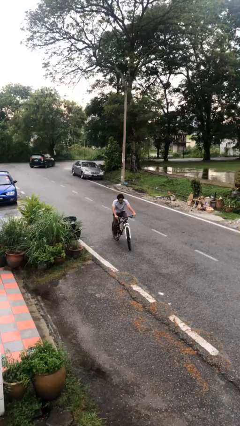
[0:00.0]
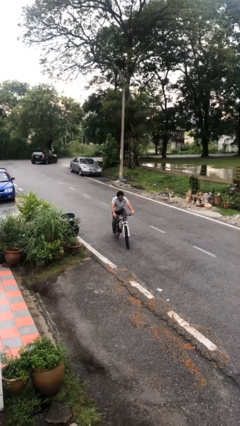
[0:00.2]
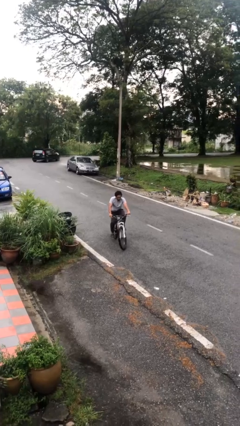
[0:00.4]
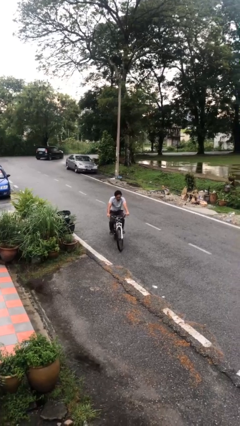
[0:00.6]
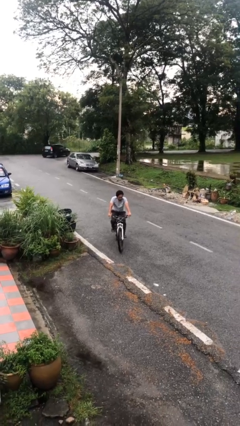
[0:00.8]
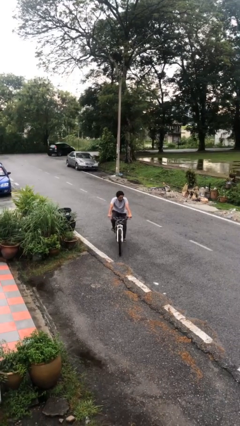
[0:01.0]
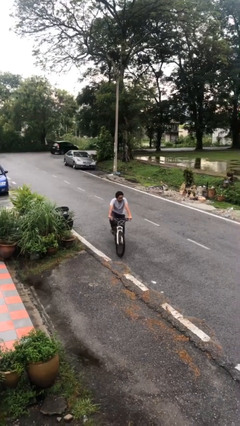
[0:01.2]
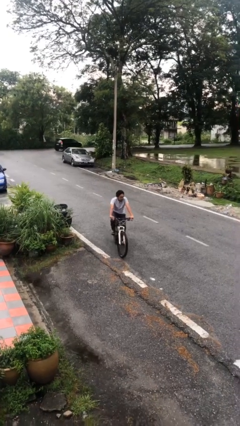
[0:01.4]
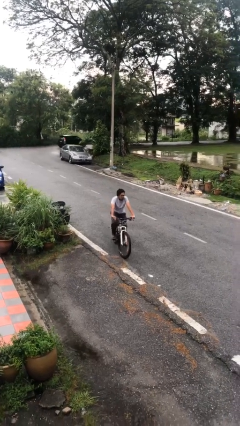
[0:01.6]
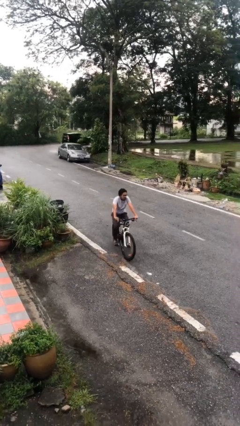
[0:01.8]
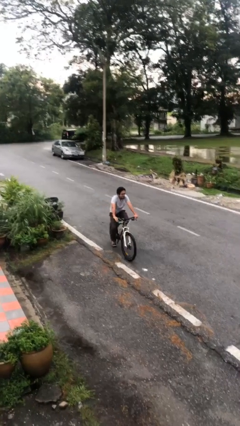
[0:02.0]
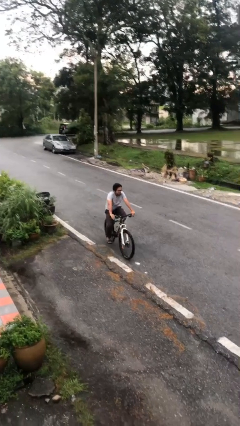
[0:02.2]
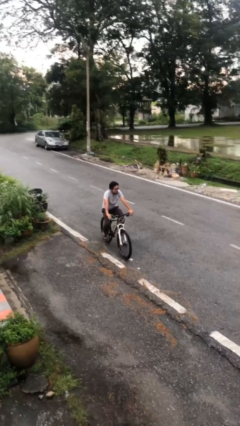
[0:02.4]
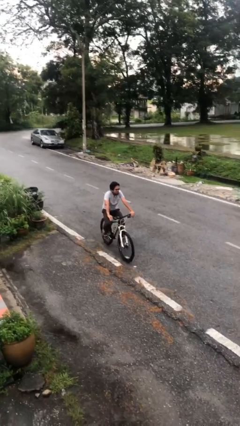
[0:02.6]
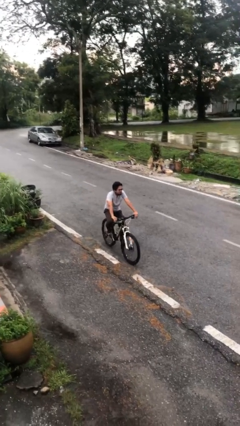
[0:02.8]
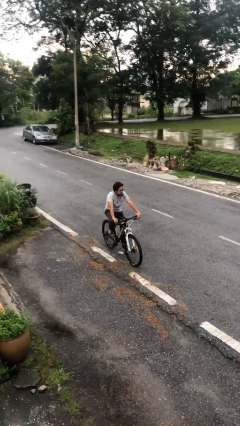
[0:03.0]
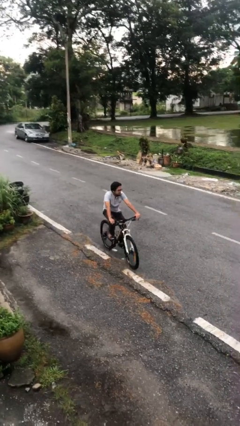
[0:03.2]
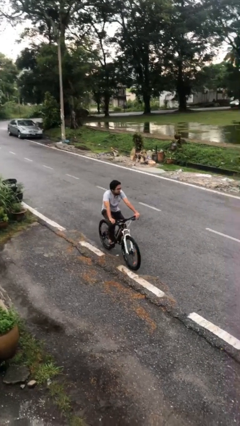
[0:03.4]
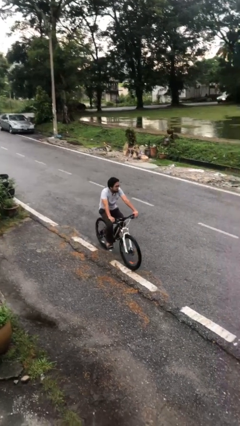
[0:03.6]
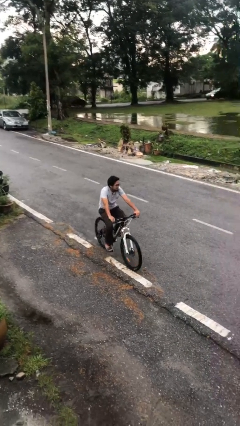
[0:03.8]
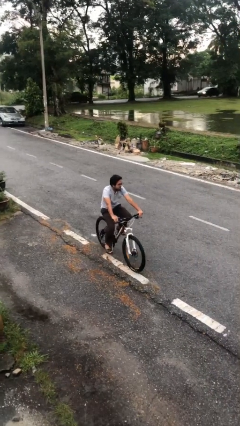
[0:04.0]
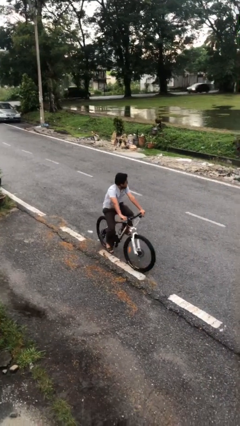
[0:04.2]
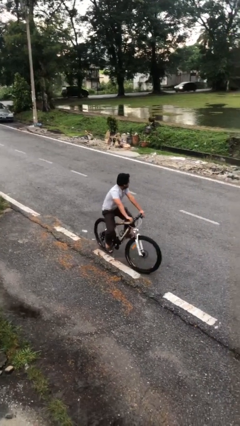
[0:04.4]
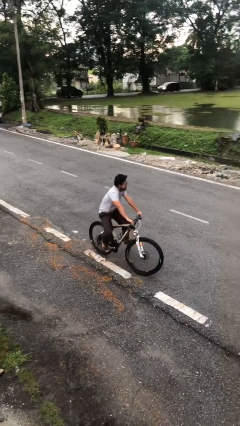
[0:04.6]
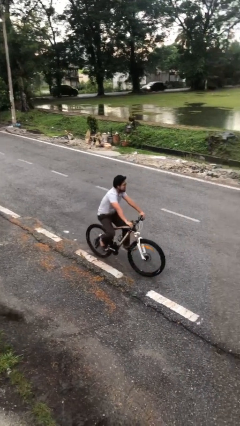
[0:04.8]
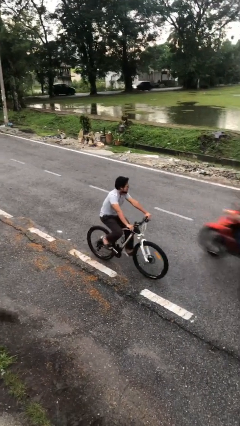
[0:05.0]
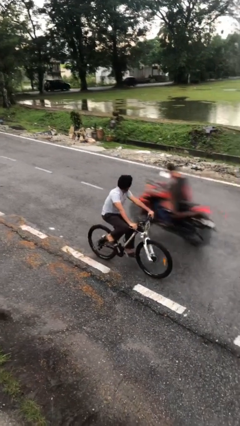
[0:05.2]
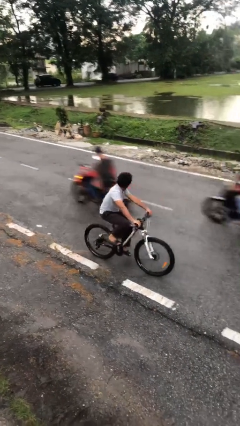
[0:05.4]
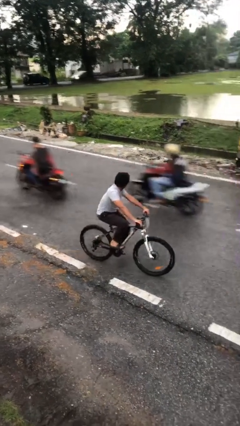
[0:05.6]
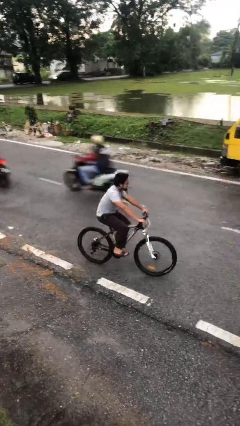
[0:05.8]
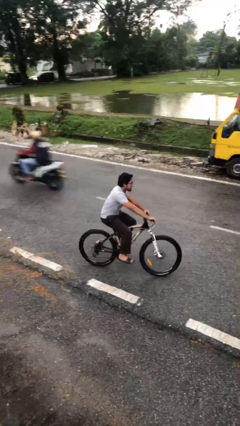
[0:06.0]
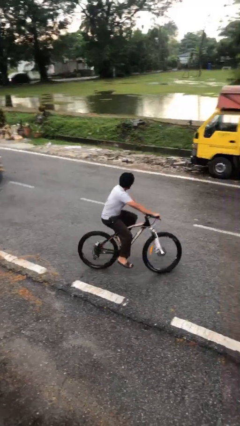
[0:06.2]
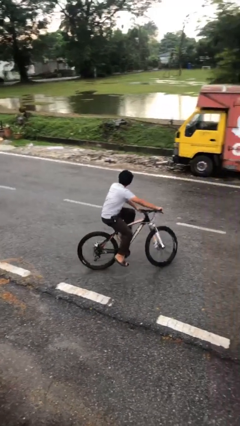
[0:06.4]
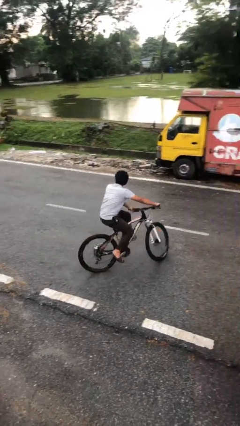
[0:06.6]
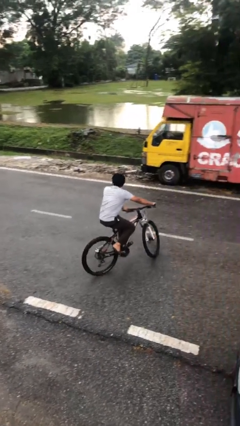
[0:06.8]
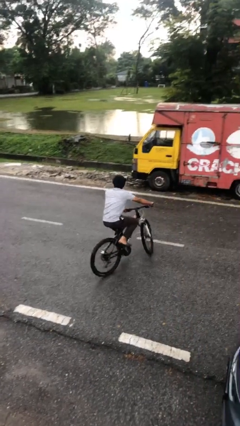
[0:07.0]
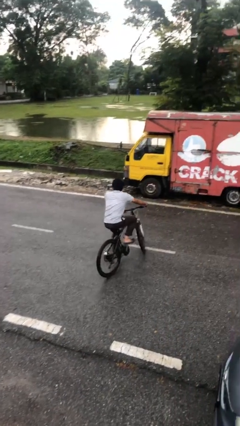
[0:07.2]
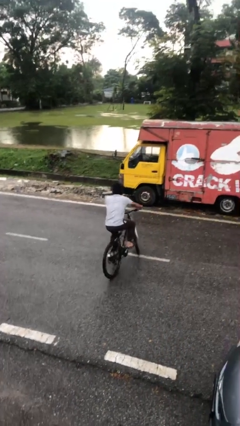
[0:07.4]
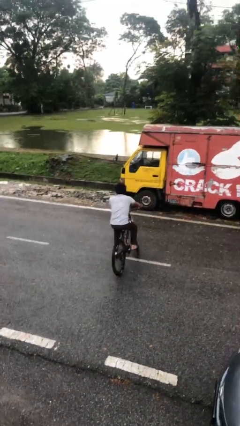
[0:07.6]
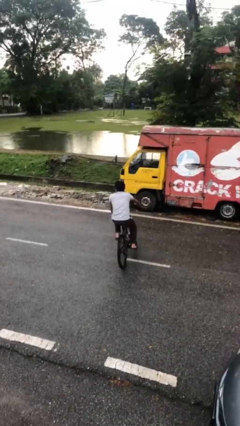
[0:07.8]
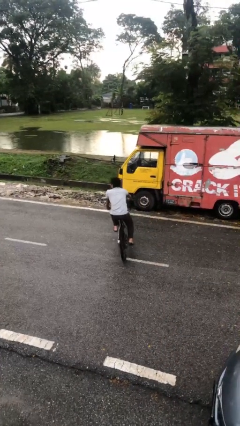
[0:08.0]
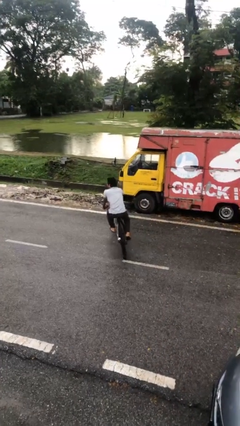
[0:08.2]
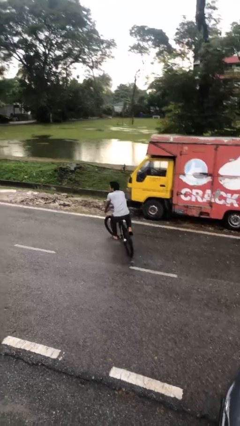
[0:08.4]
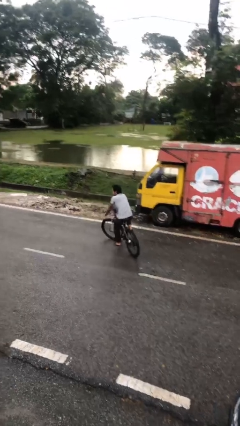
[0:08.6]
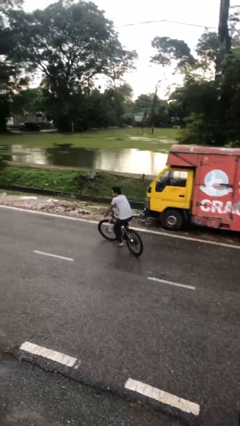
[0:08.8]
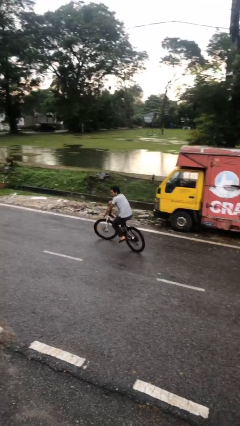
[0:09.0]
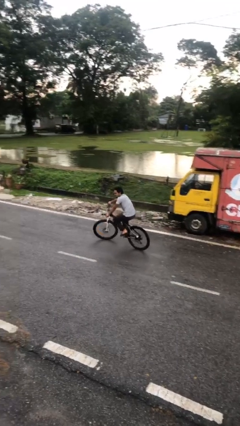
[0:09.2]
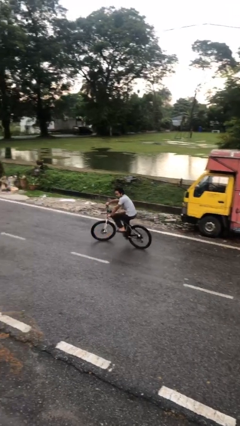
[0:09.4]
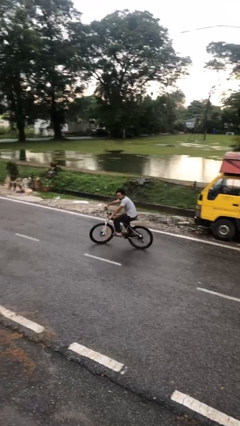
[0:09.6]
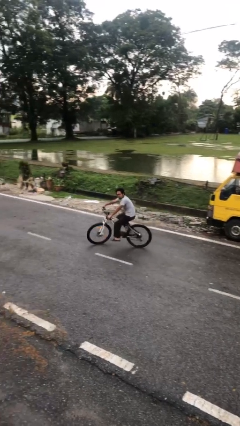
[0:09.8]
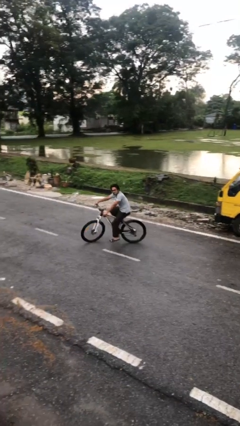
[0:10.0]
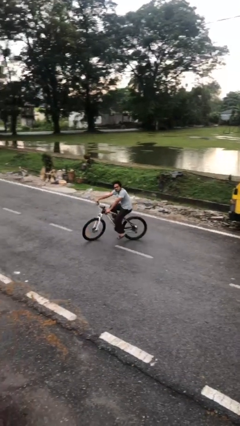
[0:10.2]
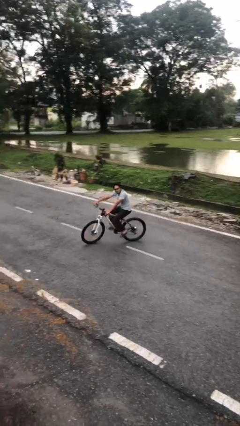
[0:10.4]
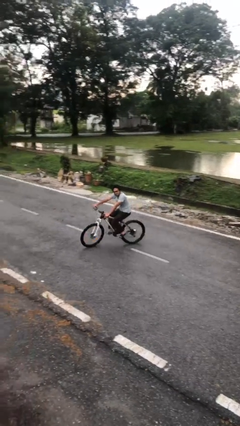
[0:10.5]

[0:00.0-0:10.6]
person rides bicycle

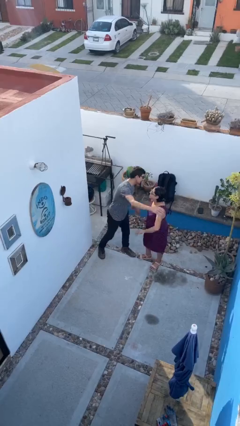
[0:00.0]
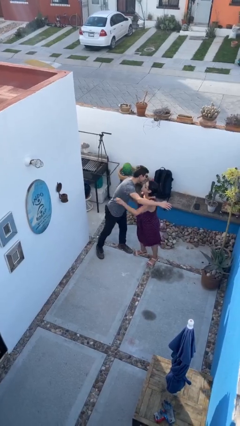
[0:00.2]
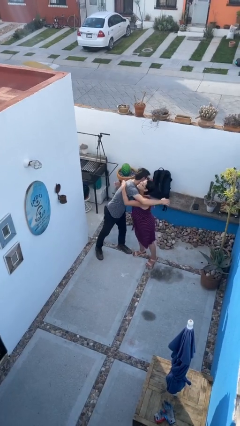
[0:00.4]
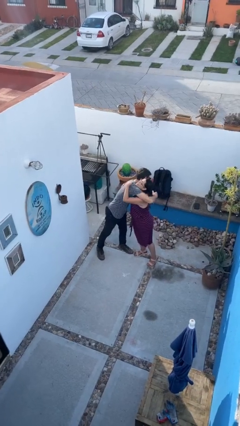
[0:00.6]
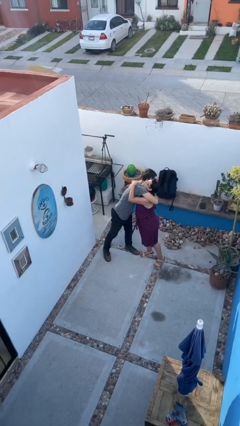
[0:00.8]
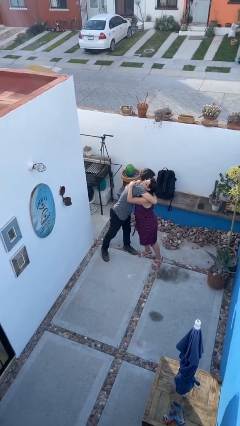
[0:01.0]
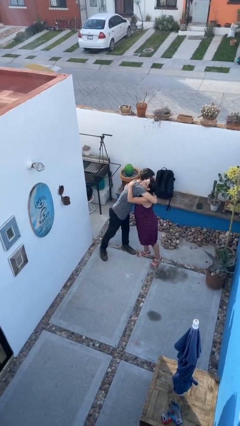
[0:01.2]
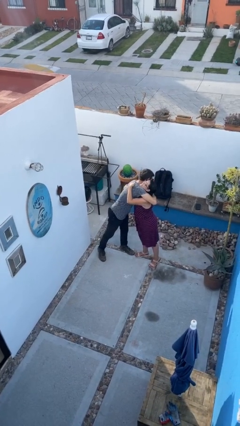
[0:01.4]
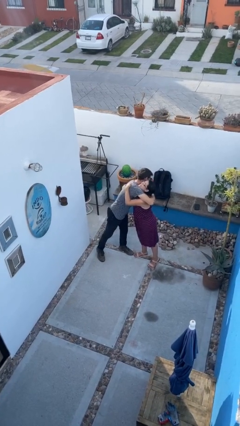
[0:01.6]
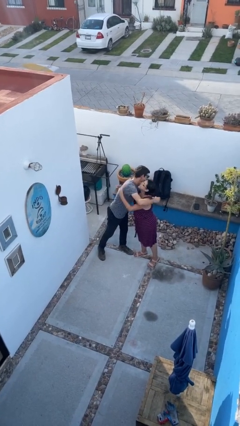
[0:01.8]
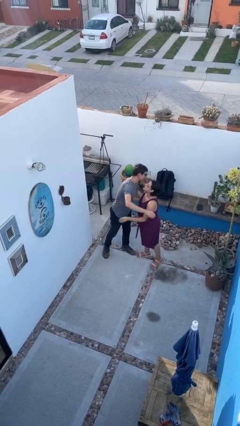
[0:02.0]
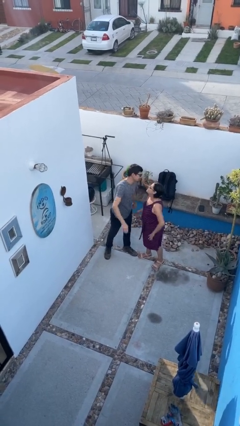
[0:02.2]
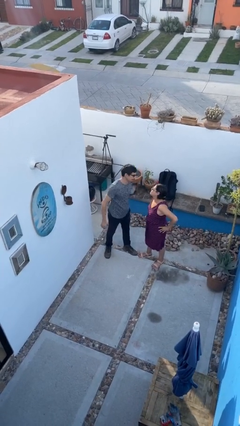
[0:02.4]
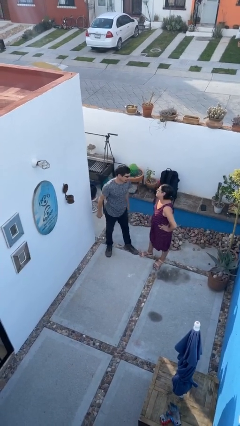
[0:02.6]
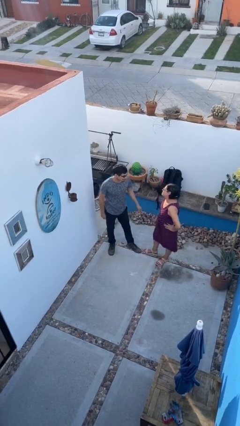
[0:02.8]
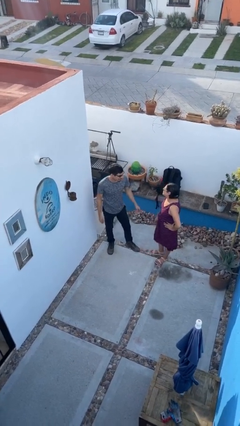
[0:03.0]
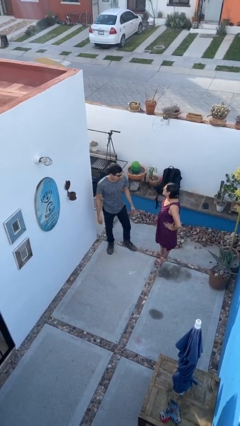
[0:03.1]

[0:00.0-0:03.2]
person embraces person

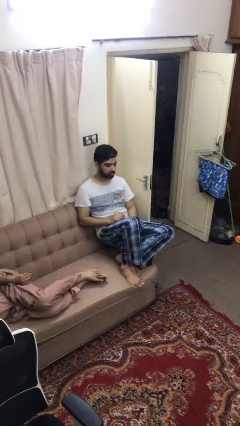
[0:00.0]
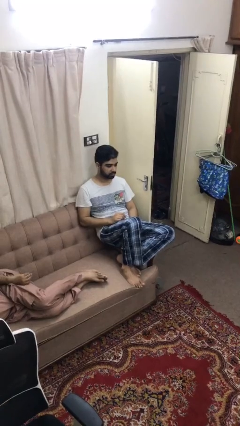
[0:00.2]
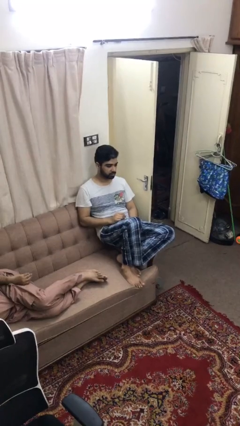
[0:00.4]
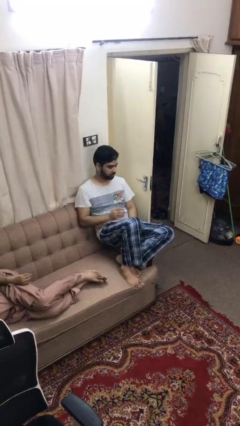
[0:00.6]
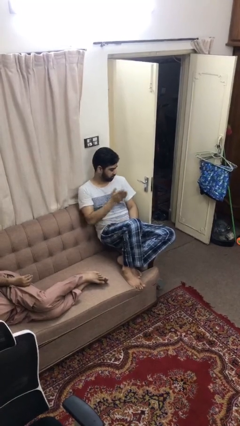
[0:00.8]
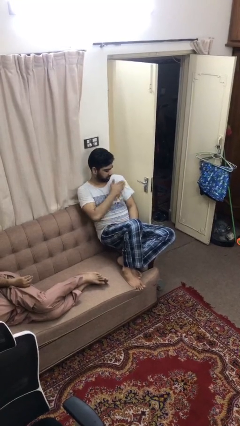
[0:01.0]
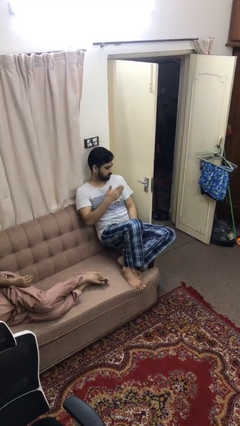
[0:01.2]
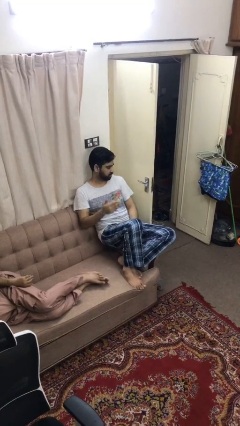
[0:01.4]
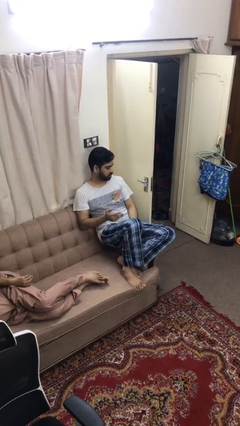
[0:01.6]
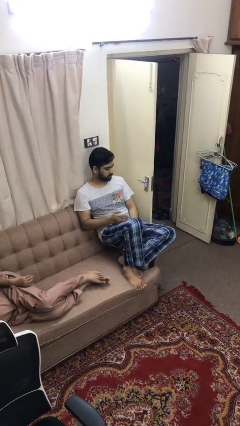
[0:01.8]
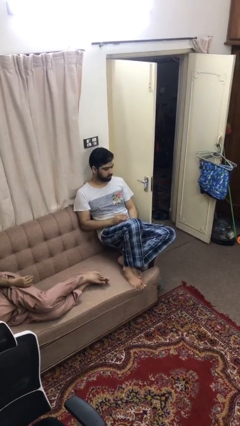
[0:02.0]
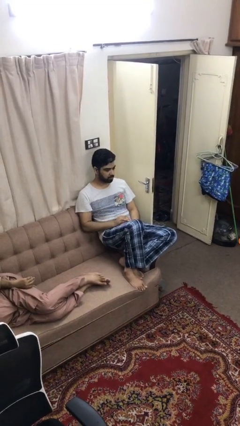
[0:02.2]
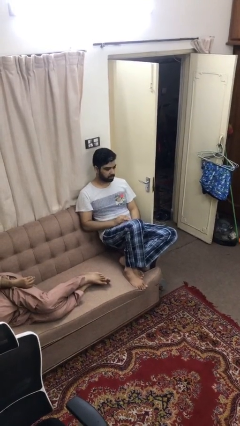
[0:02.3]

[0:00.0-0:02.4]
person swats bug

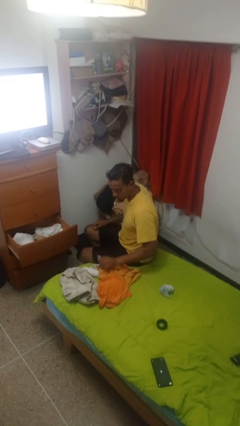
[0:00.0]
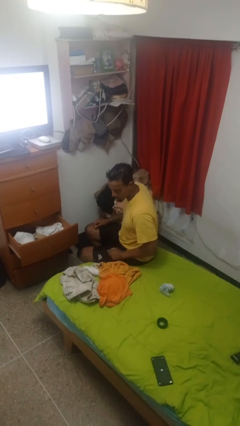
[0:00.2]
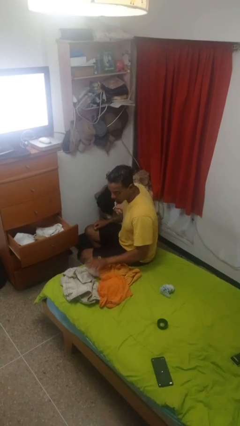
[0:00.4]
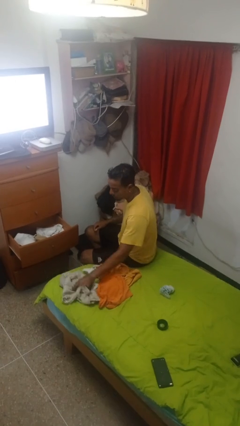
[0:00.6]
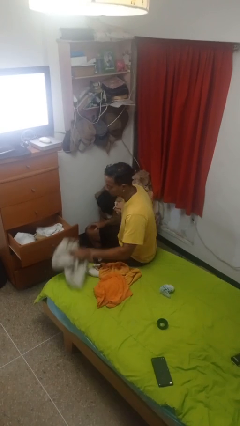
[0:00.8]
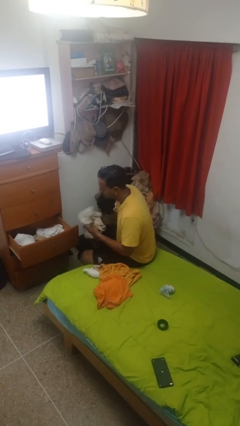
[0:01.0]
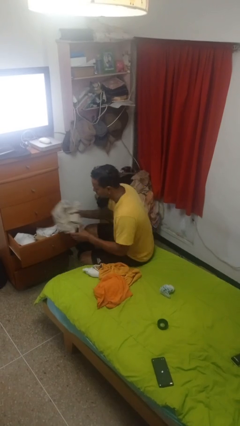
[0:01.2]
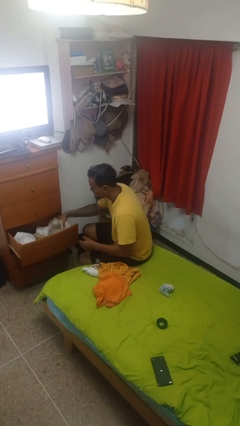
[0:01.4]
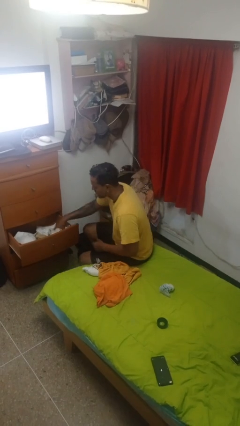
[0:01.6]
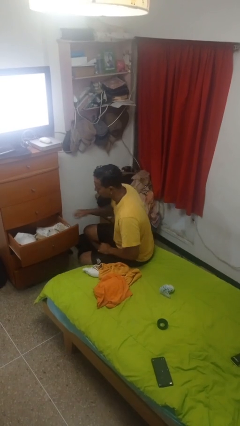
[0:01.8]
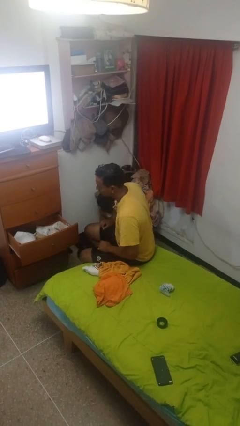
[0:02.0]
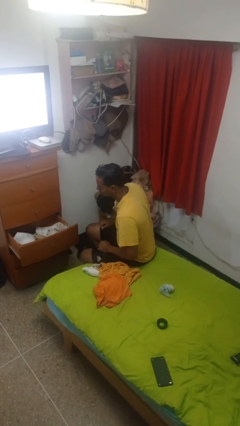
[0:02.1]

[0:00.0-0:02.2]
person puts clothes into dresser
